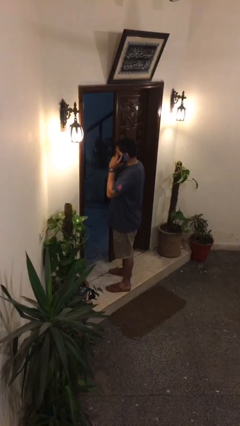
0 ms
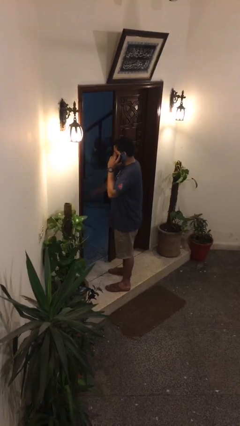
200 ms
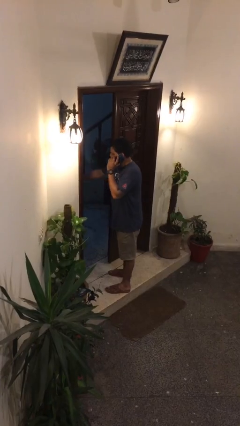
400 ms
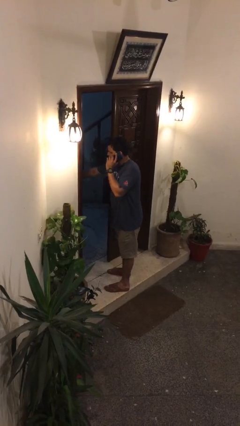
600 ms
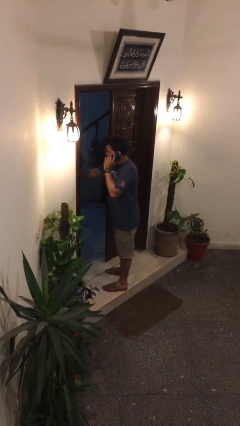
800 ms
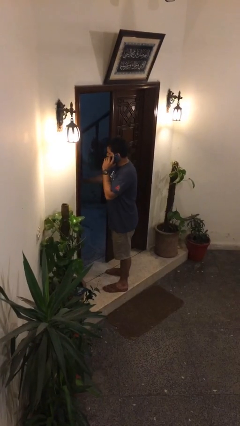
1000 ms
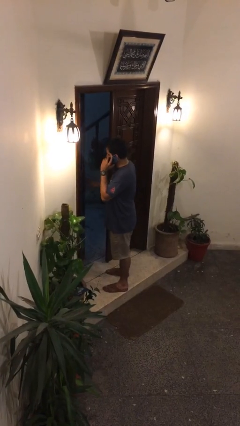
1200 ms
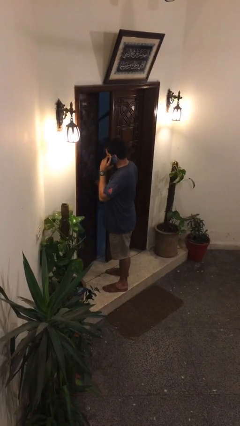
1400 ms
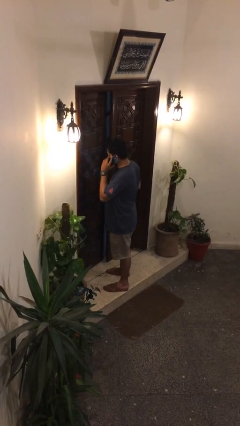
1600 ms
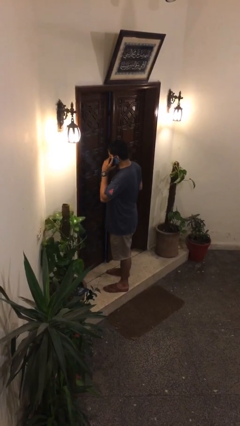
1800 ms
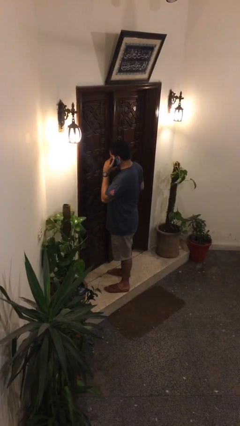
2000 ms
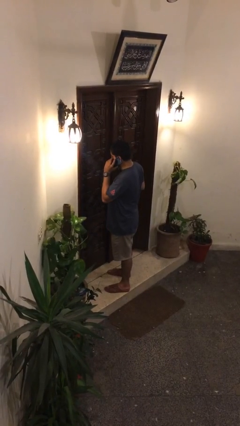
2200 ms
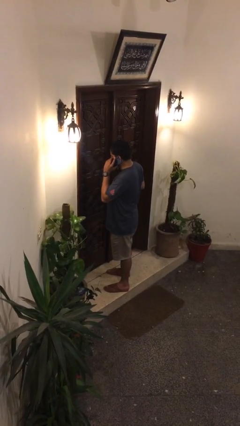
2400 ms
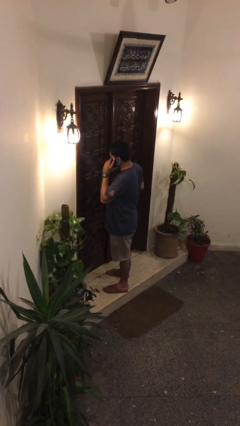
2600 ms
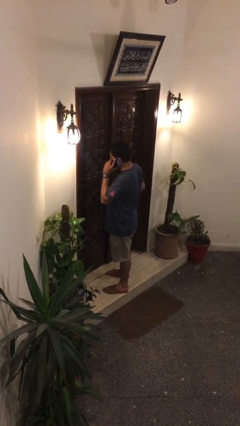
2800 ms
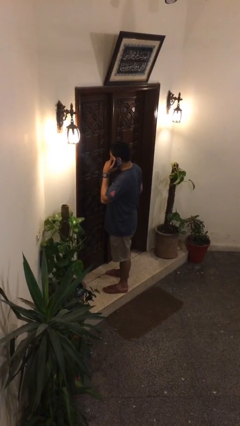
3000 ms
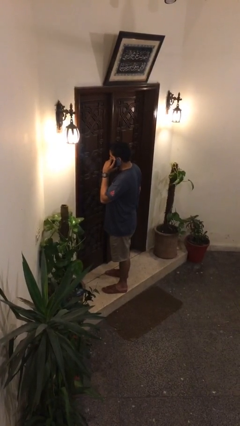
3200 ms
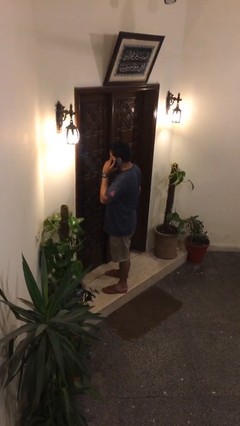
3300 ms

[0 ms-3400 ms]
person closes facility door

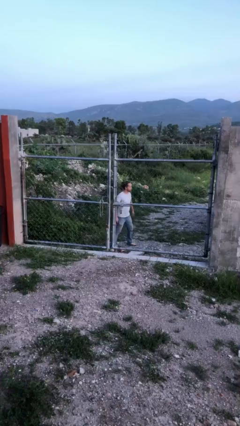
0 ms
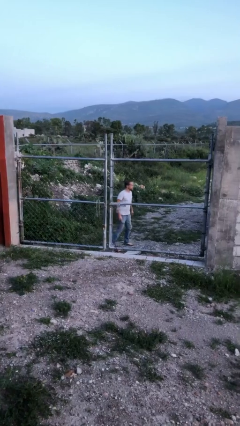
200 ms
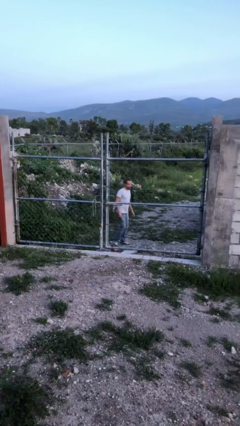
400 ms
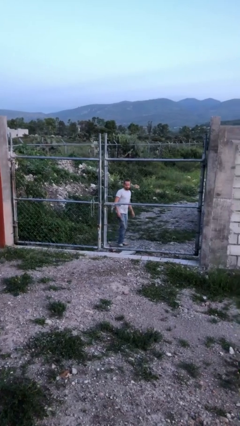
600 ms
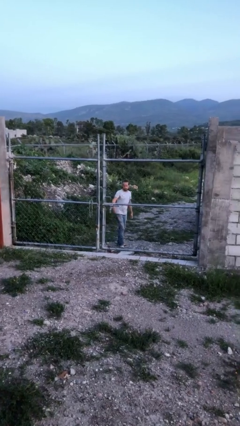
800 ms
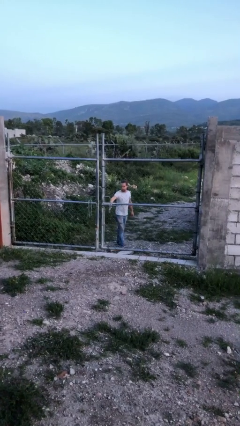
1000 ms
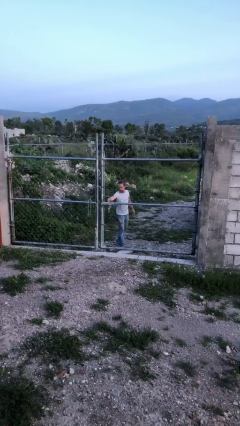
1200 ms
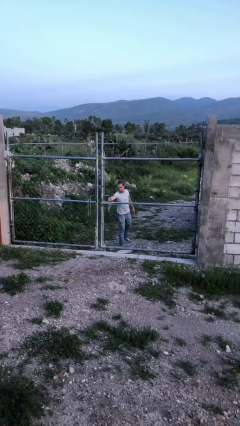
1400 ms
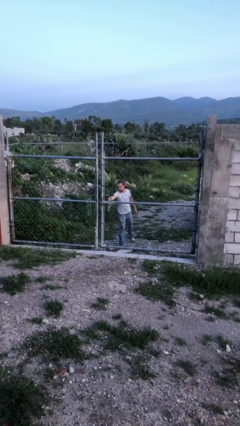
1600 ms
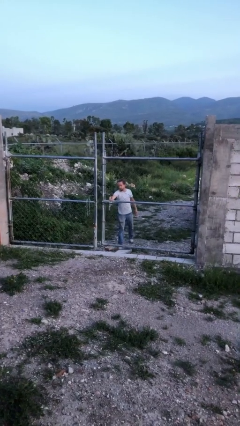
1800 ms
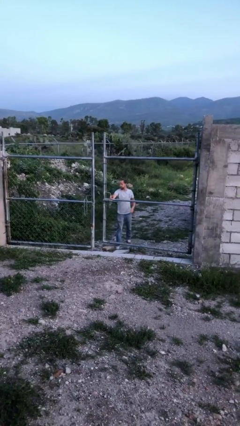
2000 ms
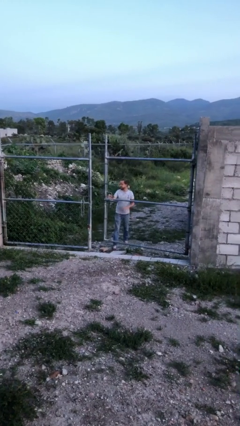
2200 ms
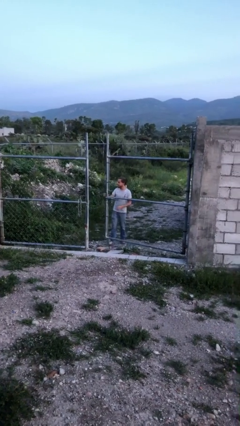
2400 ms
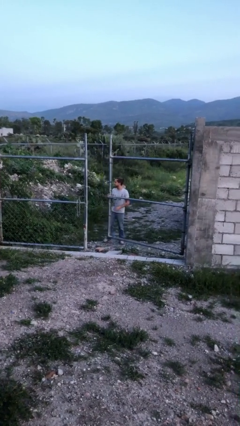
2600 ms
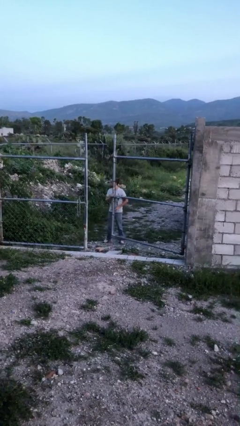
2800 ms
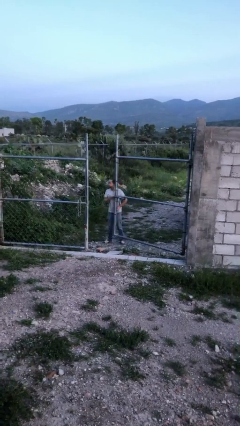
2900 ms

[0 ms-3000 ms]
person opens gate

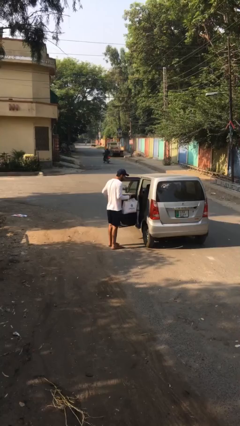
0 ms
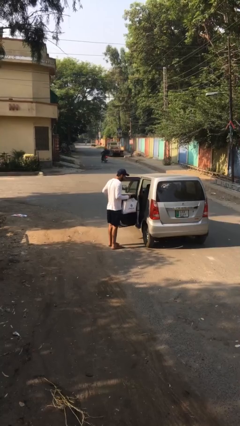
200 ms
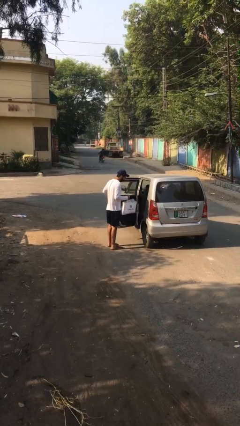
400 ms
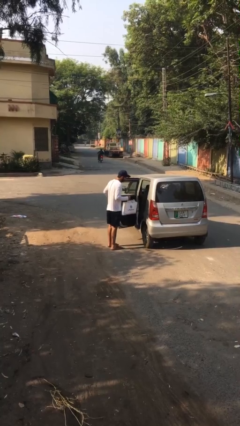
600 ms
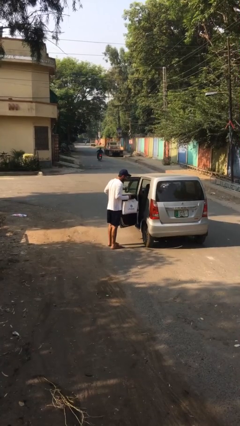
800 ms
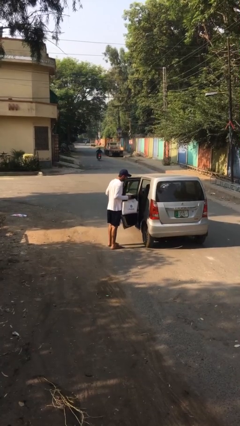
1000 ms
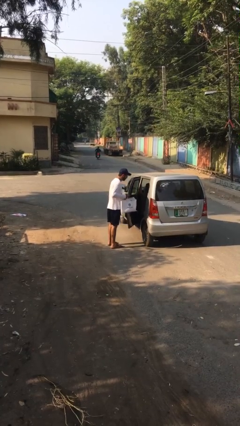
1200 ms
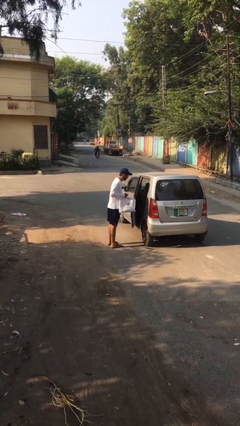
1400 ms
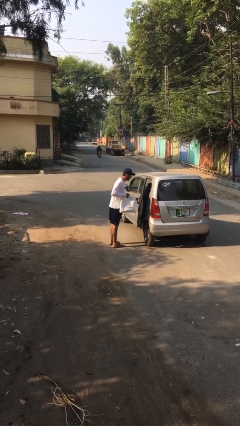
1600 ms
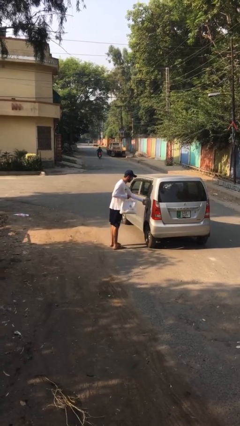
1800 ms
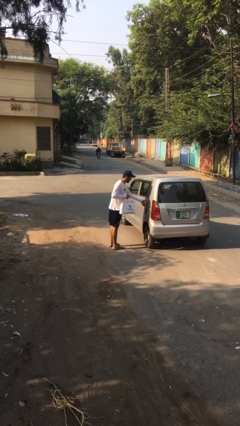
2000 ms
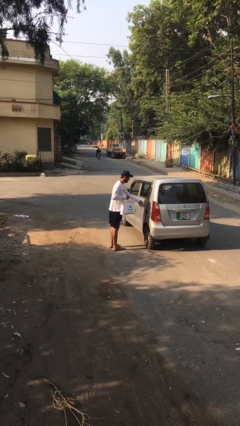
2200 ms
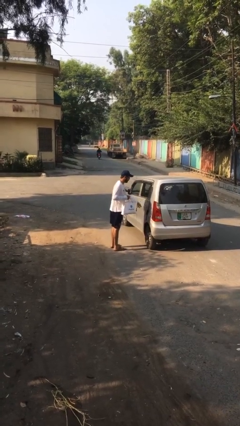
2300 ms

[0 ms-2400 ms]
person closes car door

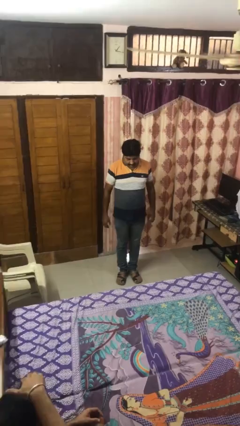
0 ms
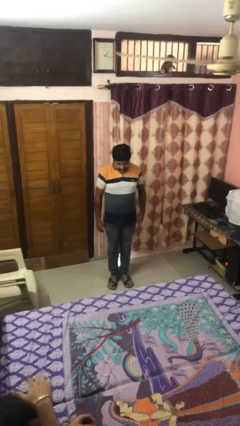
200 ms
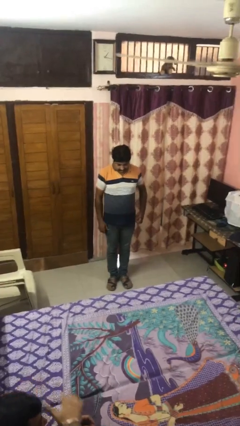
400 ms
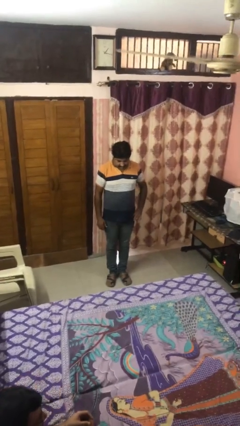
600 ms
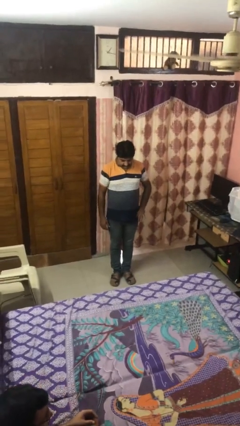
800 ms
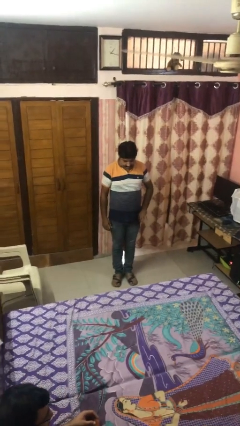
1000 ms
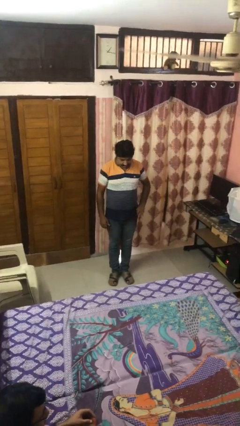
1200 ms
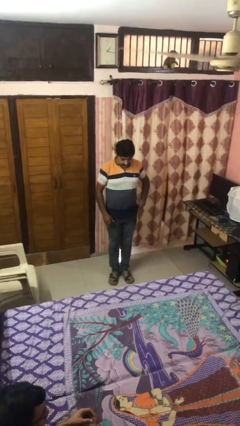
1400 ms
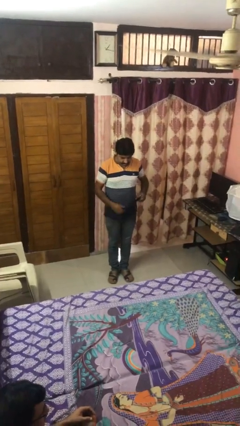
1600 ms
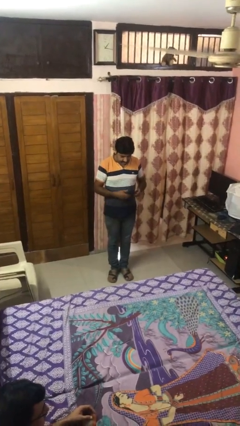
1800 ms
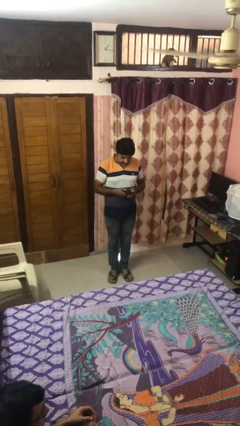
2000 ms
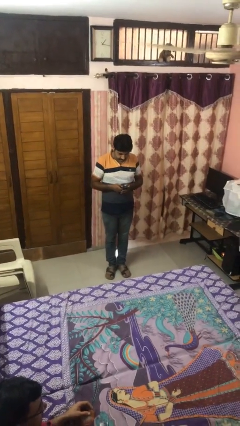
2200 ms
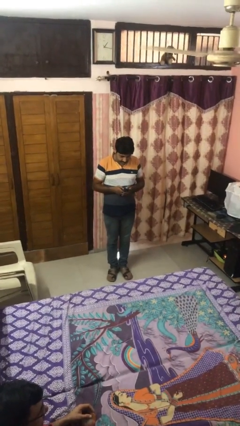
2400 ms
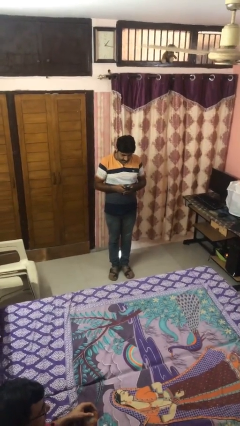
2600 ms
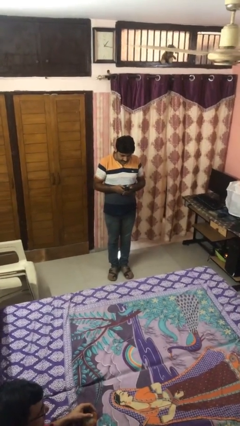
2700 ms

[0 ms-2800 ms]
person takes phone from pocket

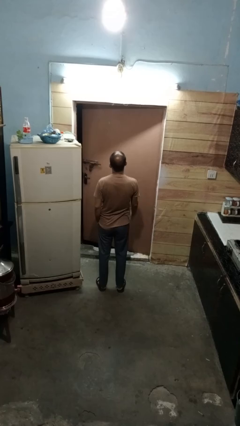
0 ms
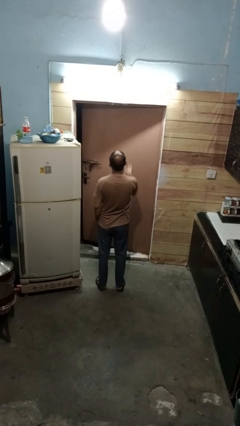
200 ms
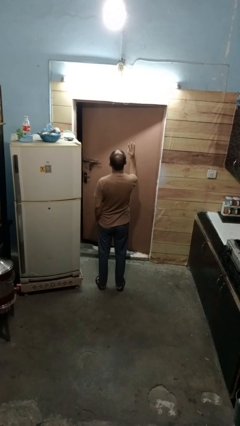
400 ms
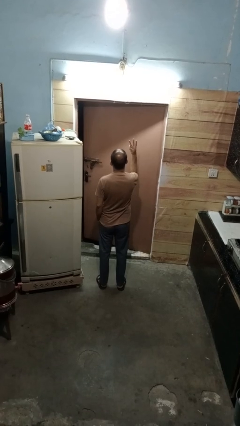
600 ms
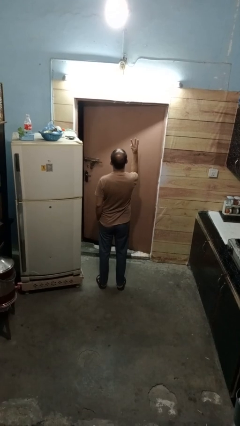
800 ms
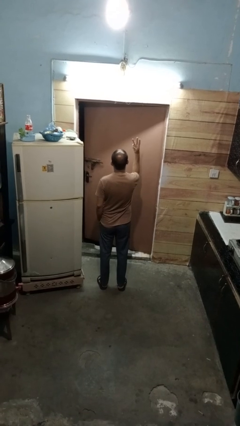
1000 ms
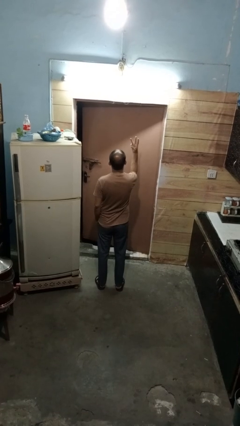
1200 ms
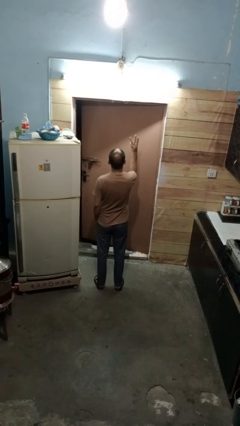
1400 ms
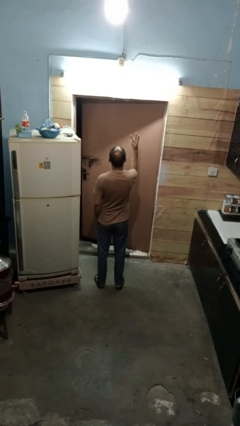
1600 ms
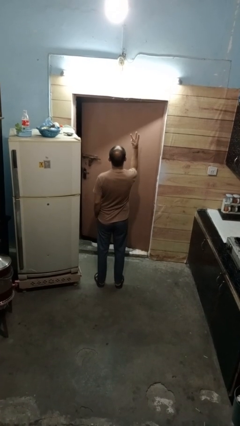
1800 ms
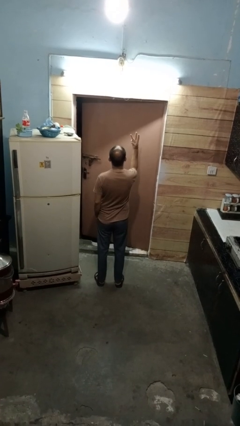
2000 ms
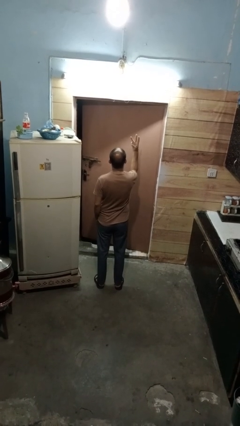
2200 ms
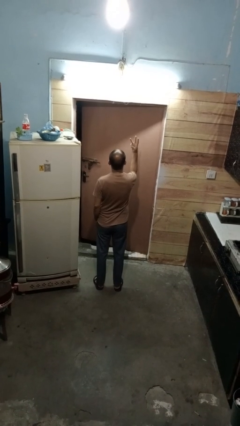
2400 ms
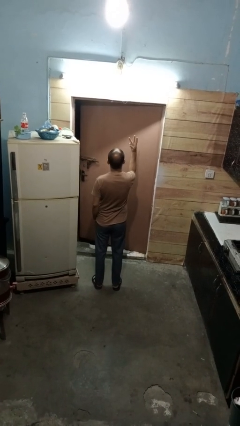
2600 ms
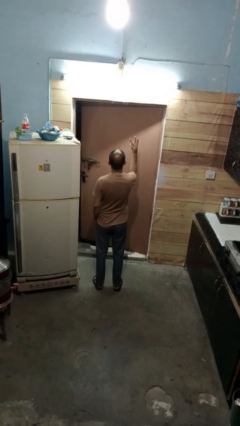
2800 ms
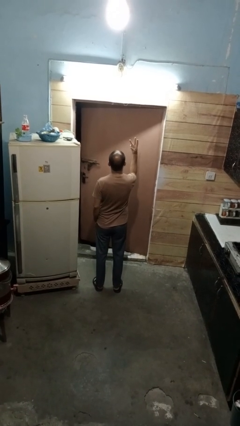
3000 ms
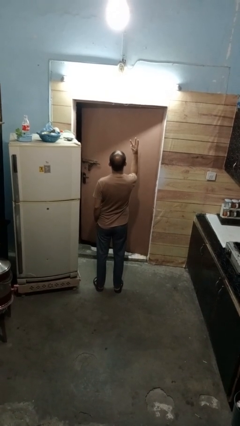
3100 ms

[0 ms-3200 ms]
person gestures number three

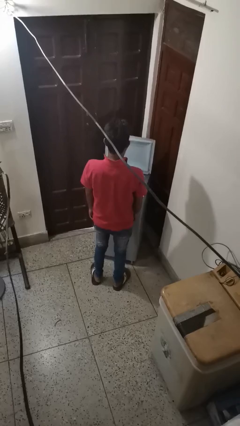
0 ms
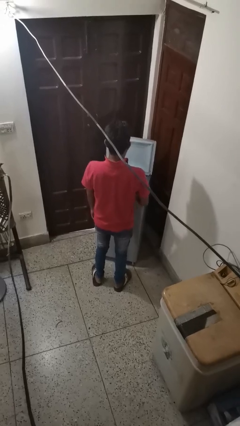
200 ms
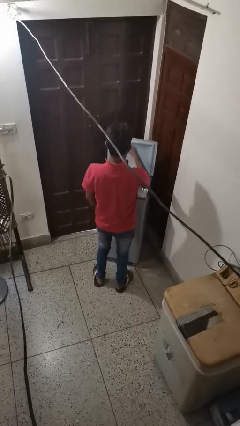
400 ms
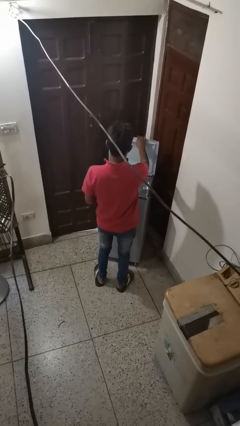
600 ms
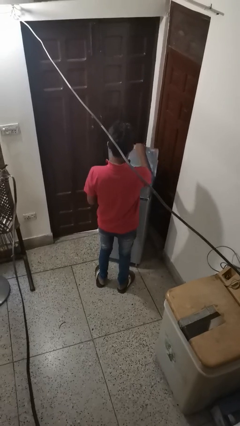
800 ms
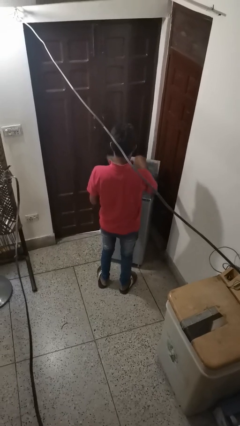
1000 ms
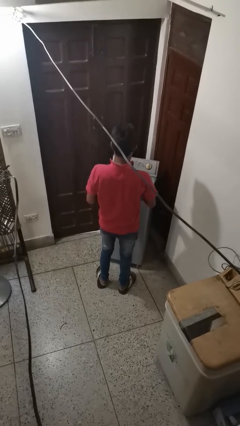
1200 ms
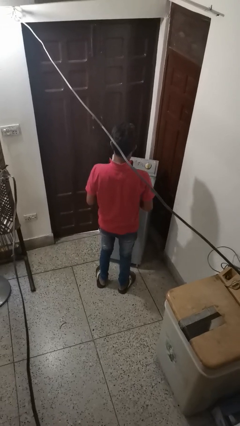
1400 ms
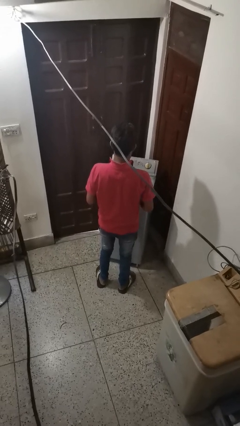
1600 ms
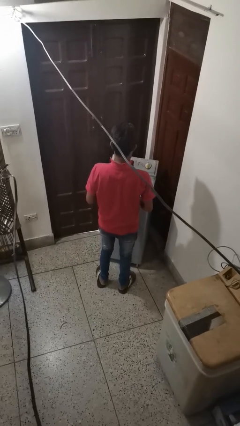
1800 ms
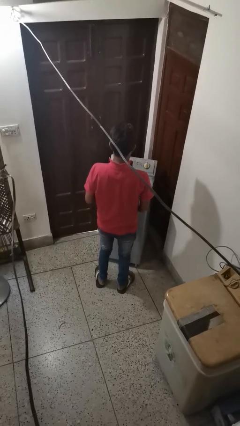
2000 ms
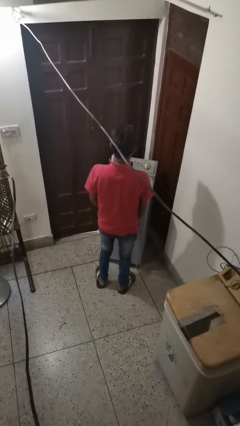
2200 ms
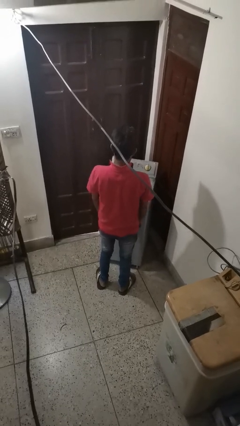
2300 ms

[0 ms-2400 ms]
person closes clothes washer
